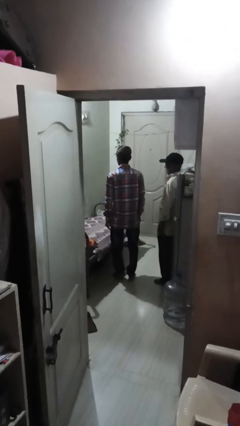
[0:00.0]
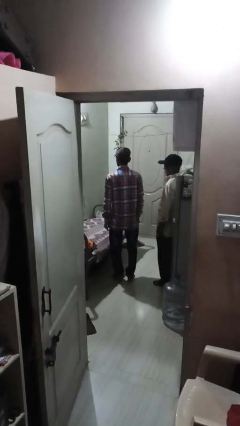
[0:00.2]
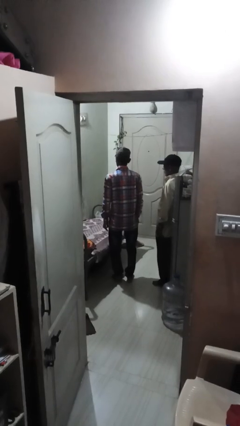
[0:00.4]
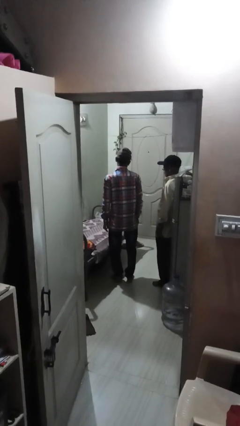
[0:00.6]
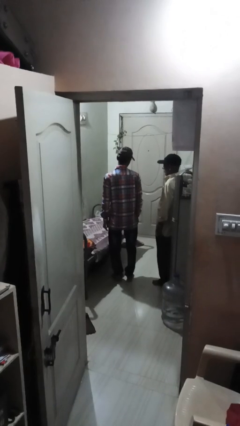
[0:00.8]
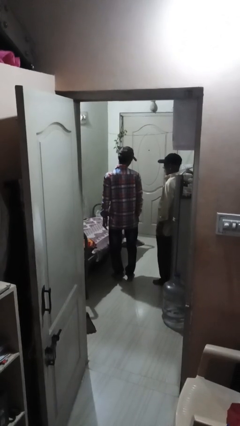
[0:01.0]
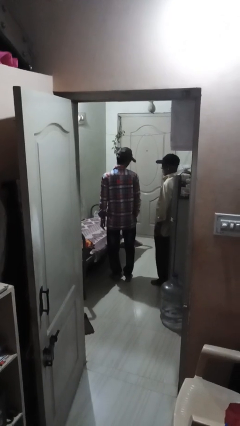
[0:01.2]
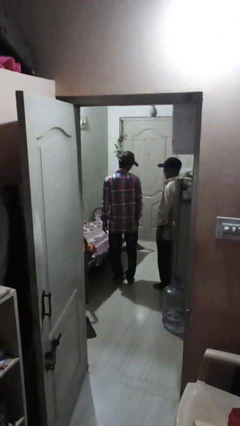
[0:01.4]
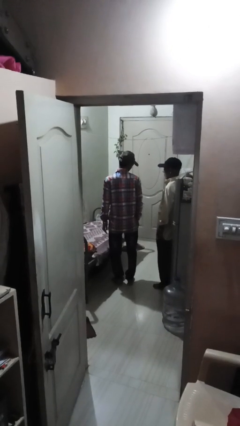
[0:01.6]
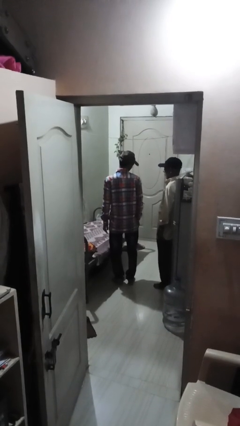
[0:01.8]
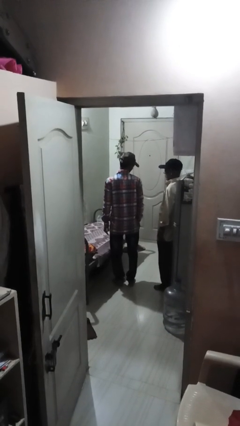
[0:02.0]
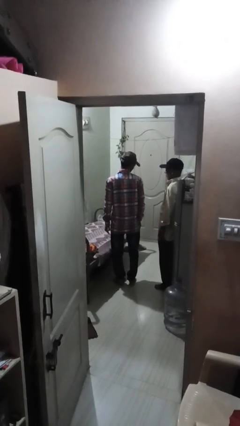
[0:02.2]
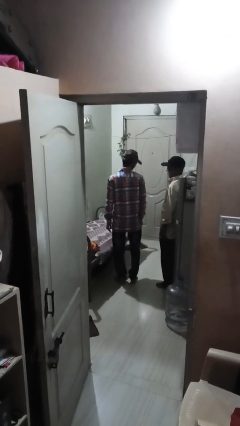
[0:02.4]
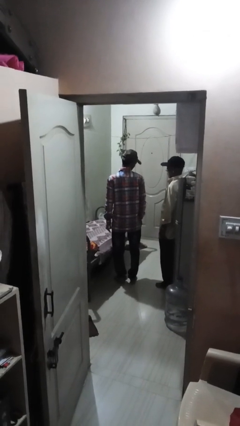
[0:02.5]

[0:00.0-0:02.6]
person looks over shoulder

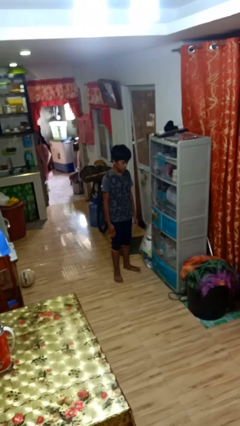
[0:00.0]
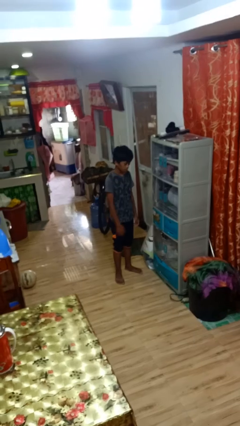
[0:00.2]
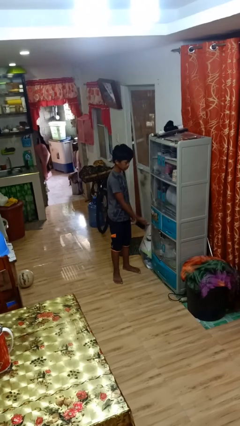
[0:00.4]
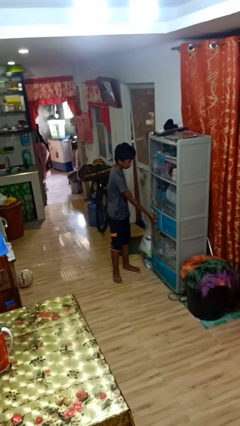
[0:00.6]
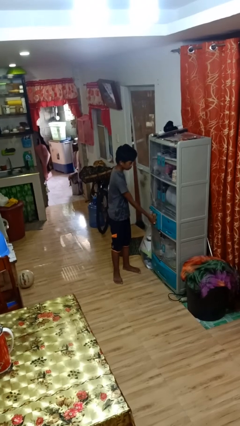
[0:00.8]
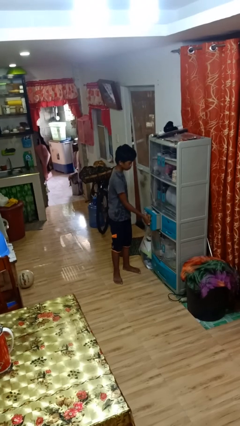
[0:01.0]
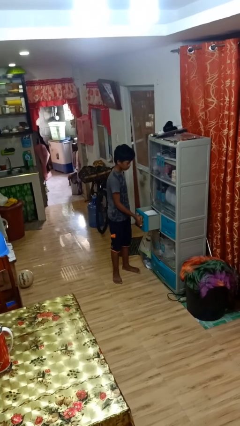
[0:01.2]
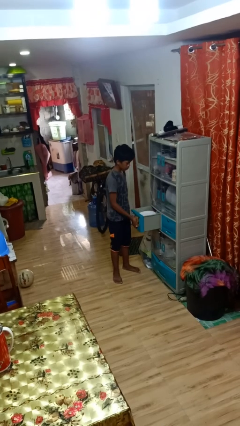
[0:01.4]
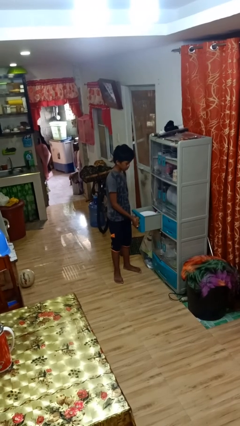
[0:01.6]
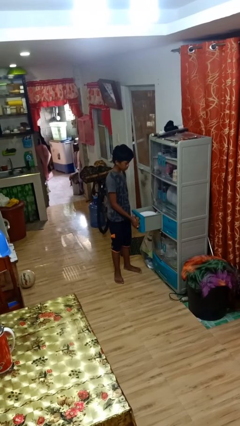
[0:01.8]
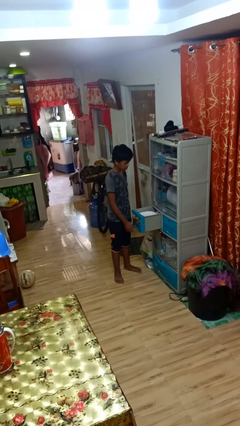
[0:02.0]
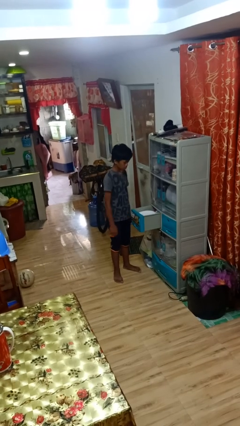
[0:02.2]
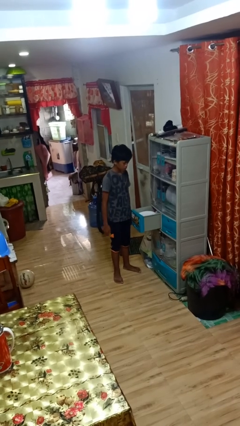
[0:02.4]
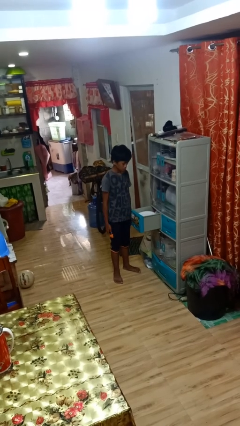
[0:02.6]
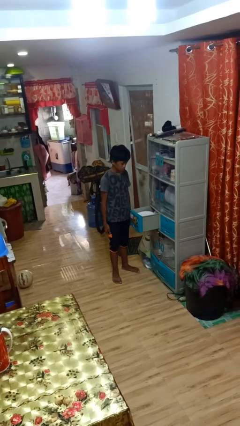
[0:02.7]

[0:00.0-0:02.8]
person opens kitchen drawer

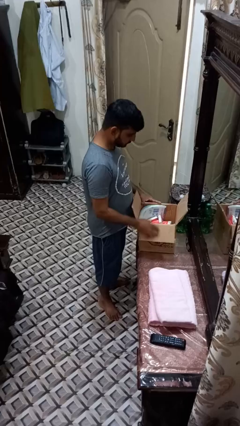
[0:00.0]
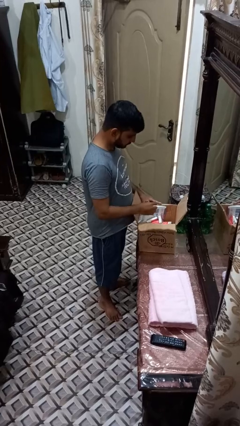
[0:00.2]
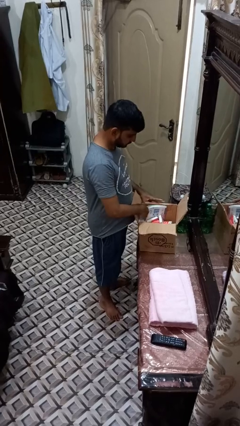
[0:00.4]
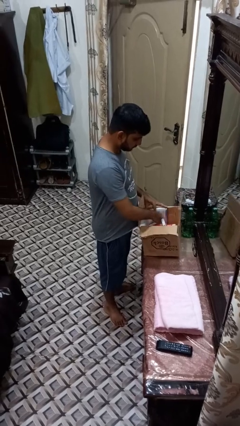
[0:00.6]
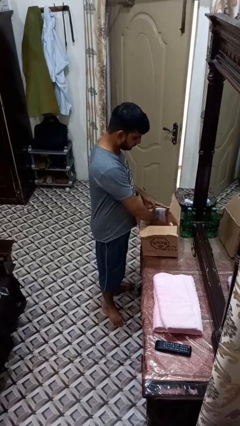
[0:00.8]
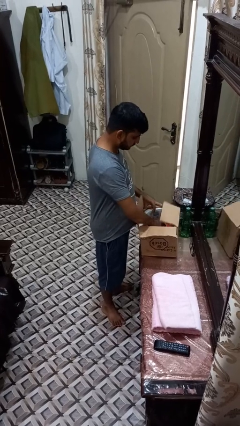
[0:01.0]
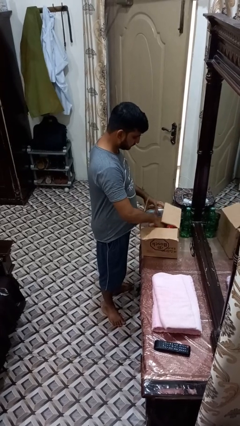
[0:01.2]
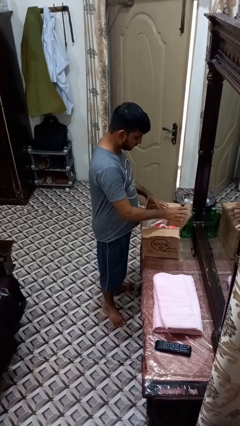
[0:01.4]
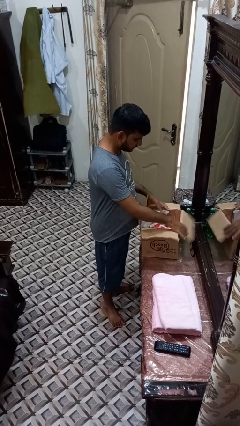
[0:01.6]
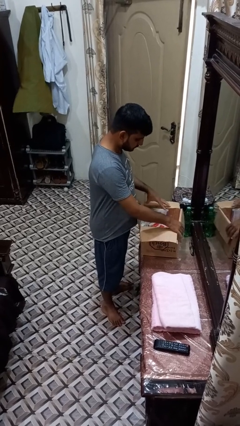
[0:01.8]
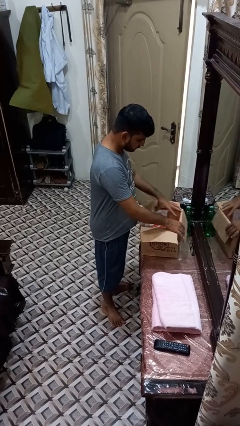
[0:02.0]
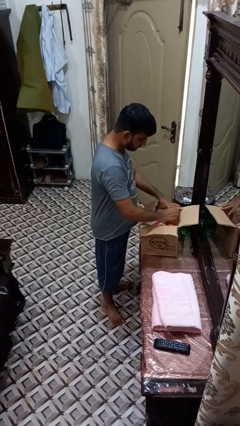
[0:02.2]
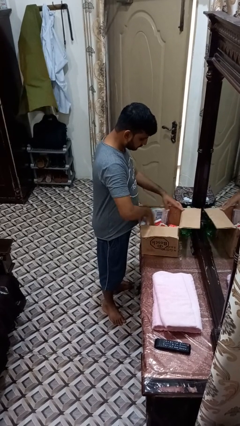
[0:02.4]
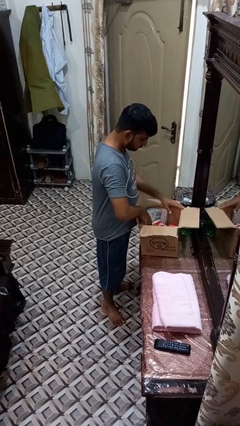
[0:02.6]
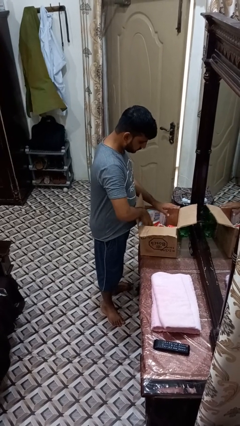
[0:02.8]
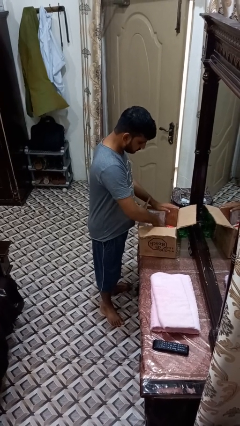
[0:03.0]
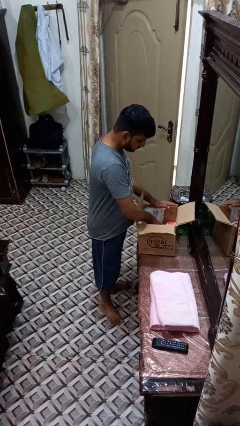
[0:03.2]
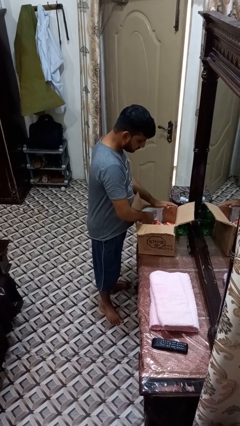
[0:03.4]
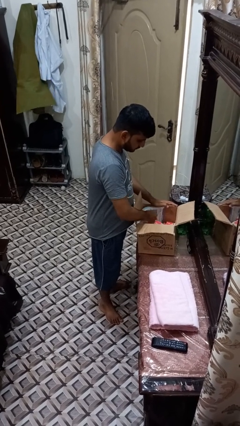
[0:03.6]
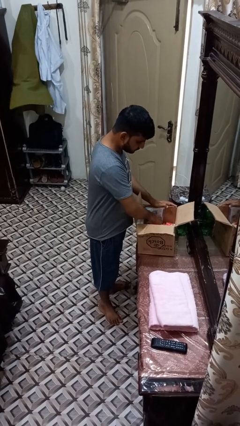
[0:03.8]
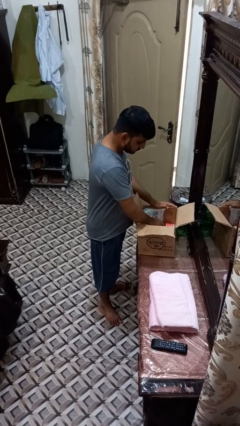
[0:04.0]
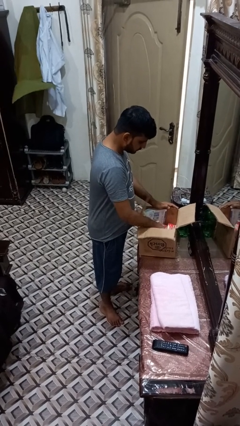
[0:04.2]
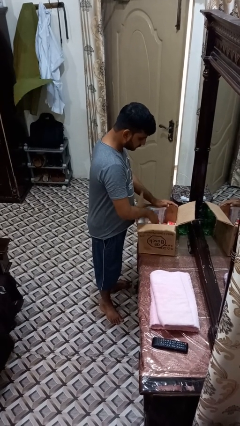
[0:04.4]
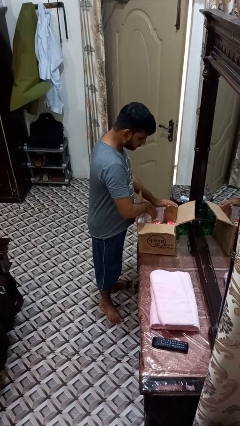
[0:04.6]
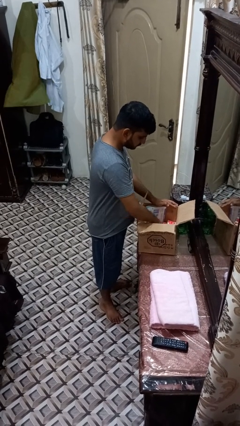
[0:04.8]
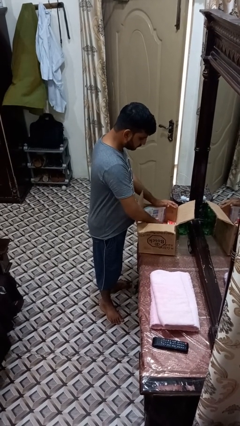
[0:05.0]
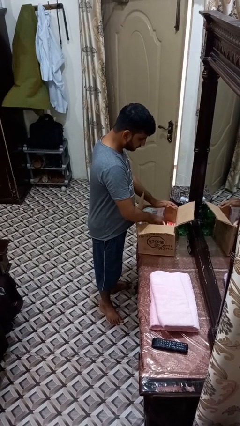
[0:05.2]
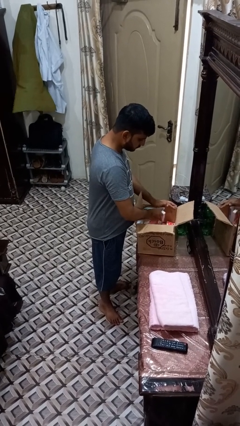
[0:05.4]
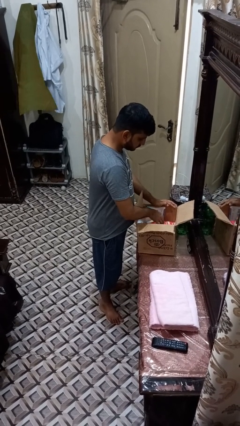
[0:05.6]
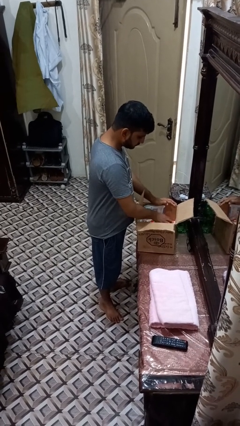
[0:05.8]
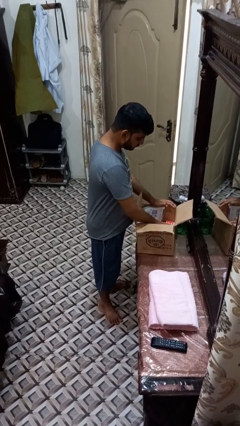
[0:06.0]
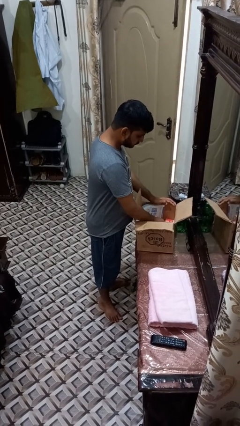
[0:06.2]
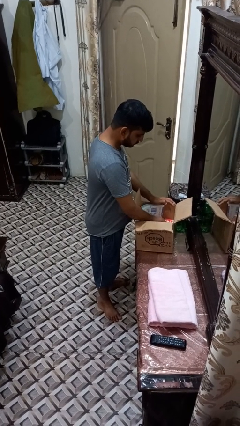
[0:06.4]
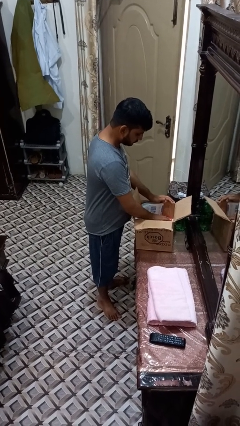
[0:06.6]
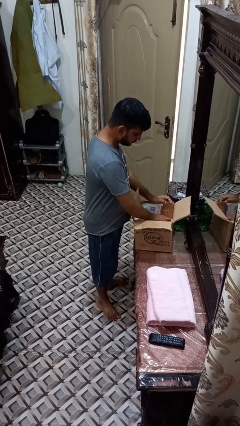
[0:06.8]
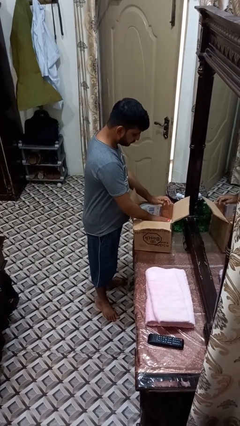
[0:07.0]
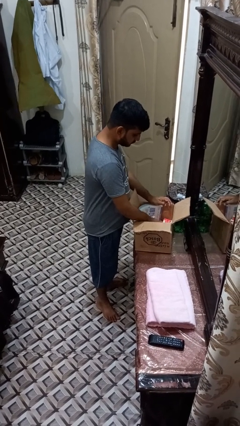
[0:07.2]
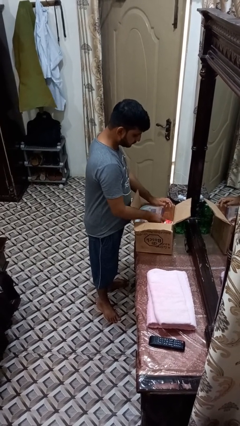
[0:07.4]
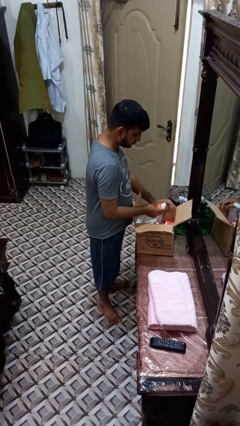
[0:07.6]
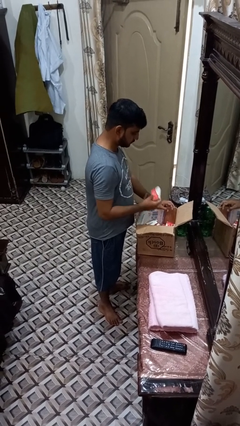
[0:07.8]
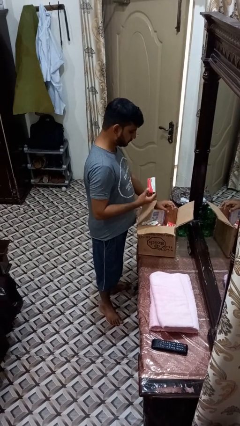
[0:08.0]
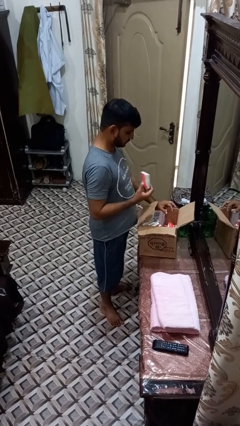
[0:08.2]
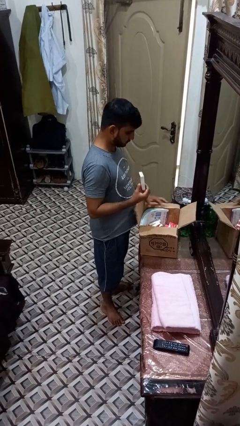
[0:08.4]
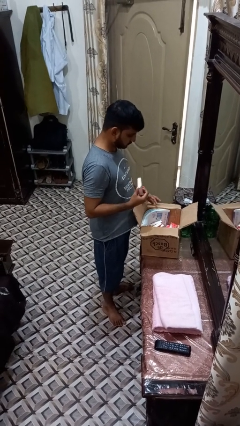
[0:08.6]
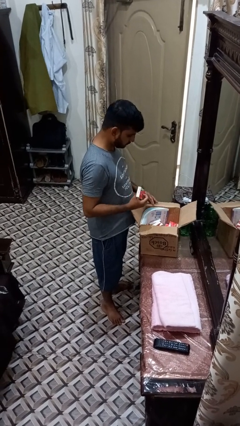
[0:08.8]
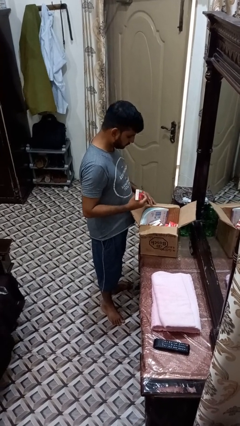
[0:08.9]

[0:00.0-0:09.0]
person searches in box

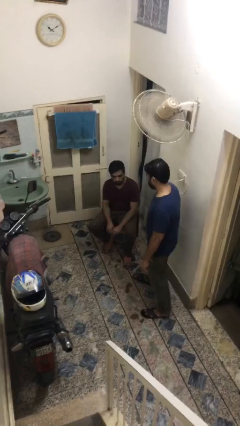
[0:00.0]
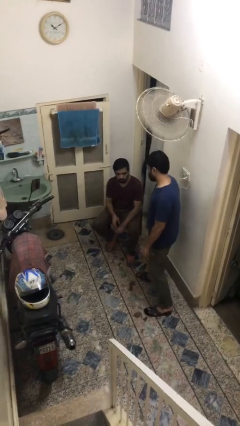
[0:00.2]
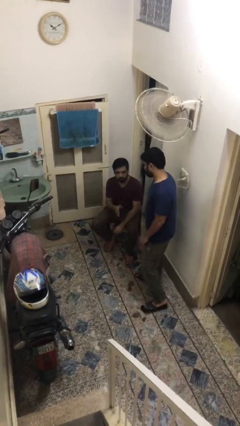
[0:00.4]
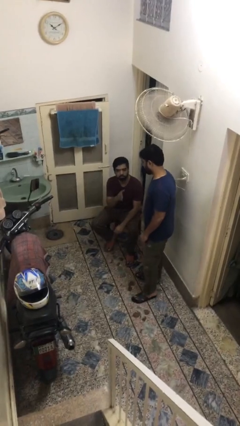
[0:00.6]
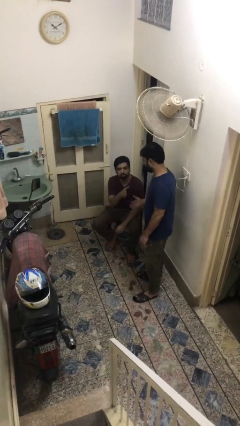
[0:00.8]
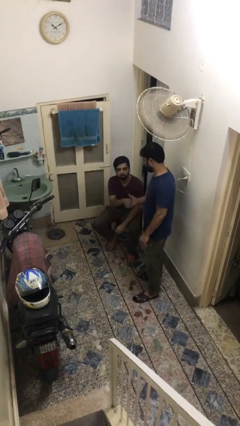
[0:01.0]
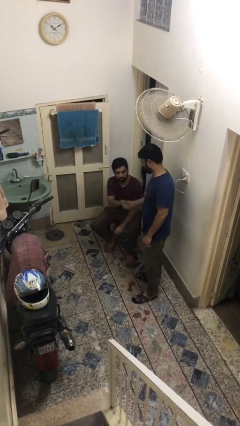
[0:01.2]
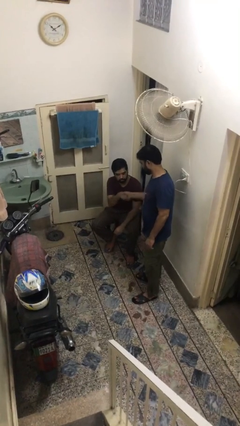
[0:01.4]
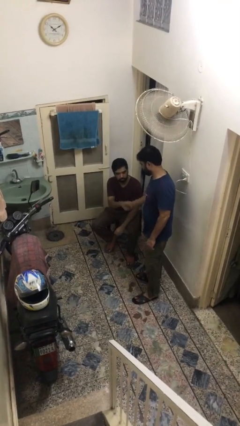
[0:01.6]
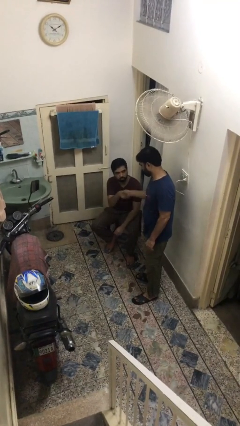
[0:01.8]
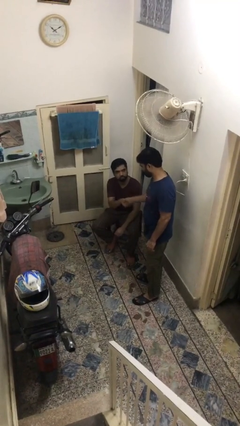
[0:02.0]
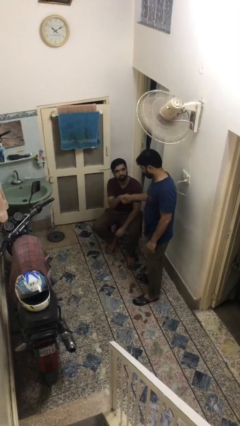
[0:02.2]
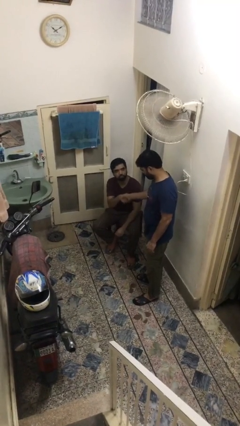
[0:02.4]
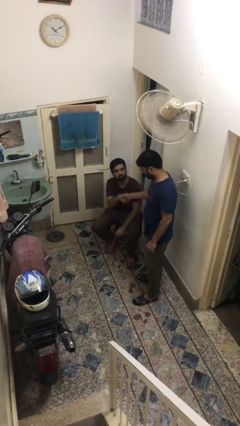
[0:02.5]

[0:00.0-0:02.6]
person shakes hand

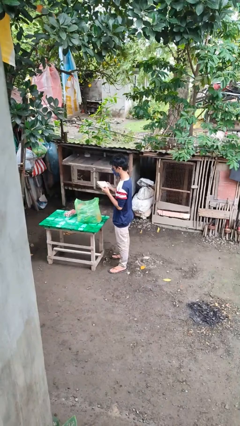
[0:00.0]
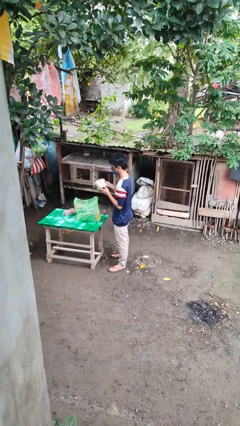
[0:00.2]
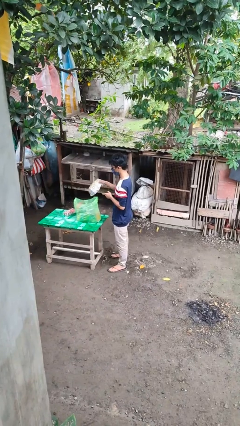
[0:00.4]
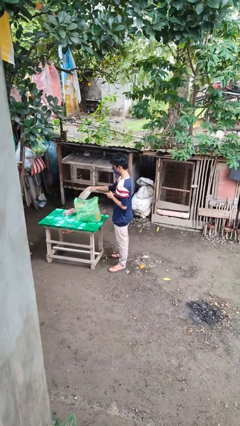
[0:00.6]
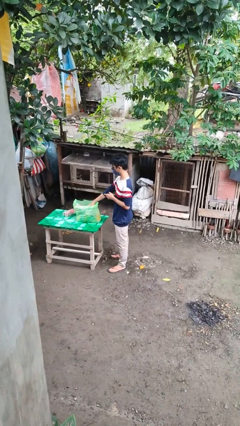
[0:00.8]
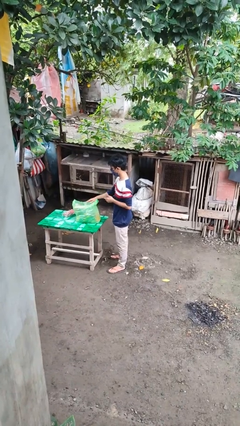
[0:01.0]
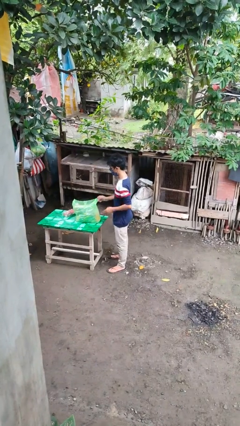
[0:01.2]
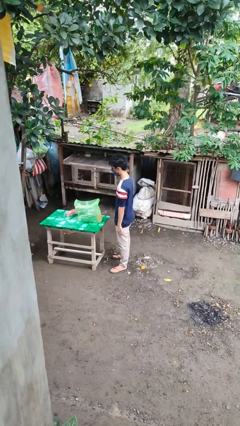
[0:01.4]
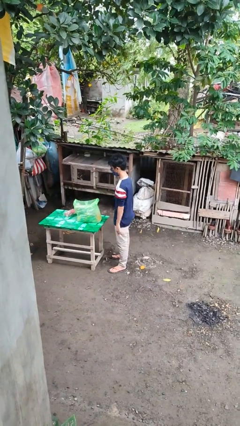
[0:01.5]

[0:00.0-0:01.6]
person puts object into bag
